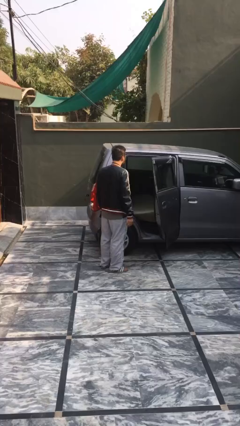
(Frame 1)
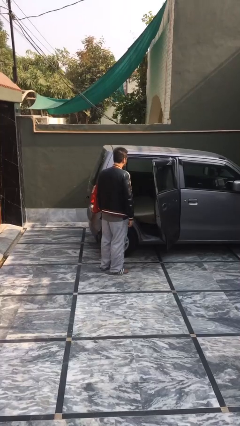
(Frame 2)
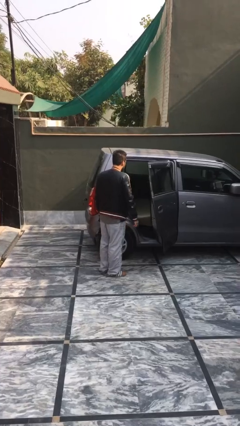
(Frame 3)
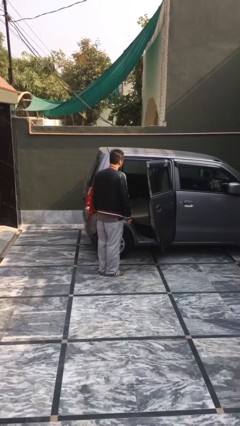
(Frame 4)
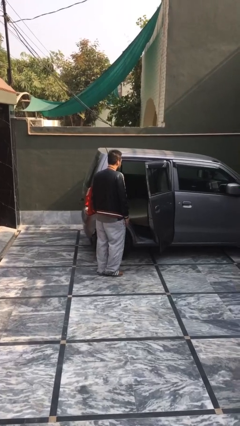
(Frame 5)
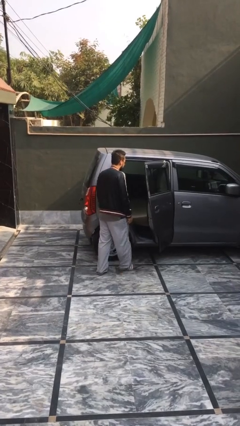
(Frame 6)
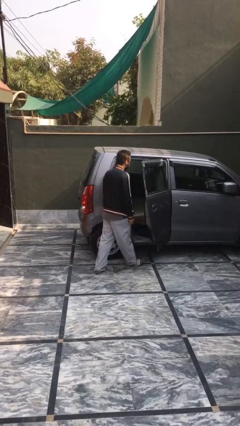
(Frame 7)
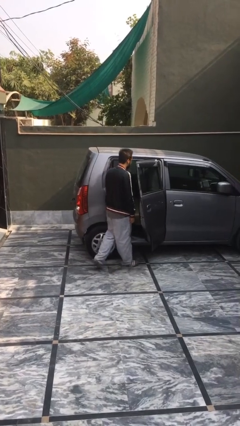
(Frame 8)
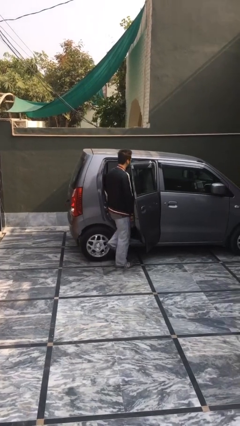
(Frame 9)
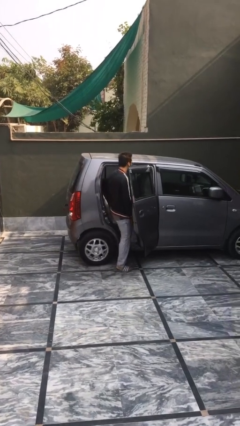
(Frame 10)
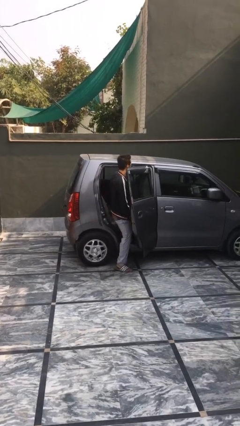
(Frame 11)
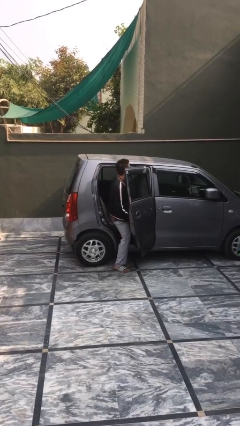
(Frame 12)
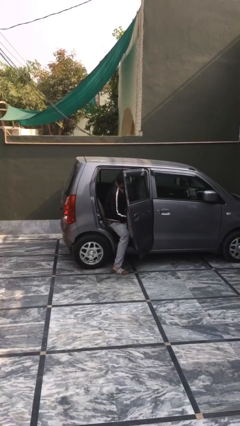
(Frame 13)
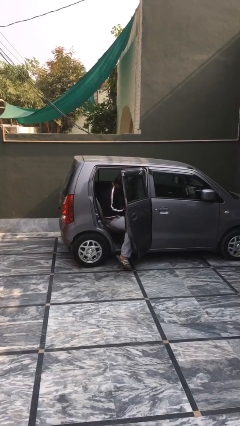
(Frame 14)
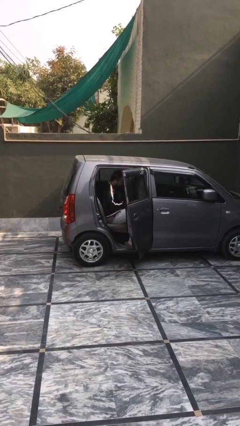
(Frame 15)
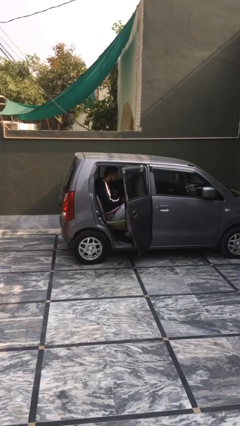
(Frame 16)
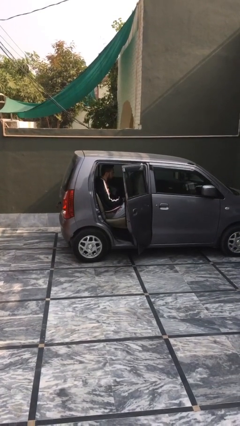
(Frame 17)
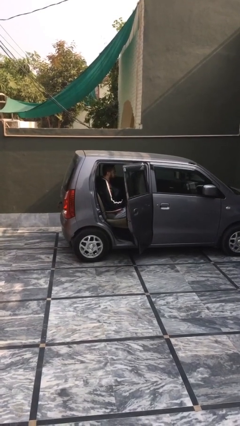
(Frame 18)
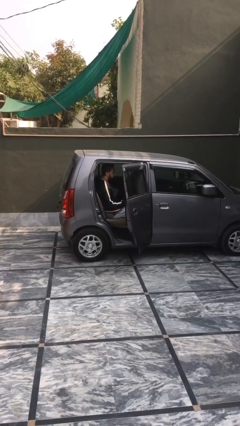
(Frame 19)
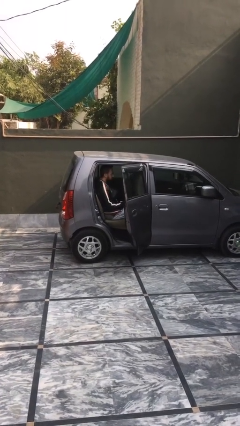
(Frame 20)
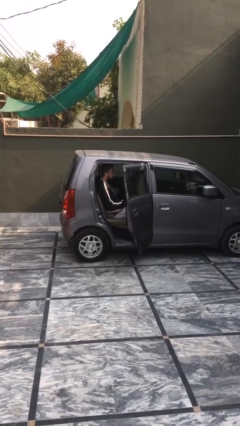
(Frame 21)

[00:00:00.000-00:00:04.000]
person enters car

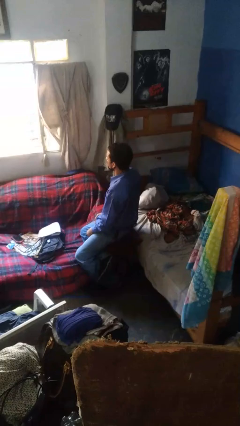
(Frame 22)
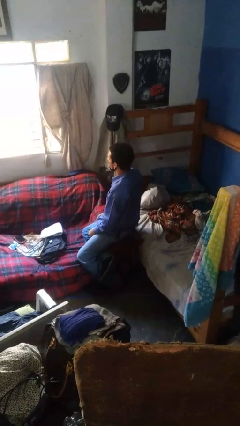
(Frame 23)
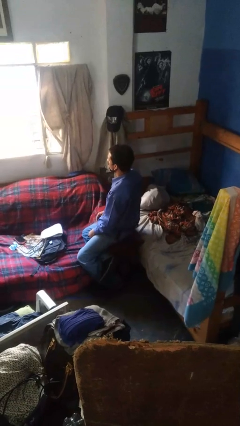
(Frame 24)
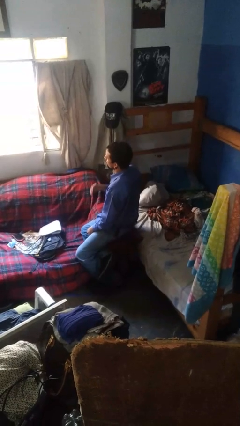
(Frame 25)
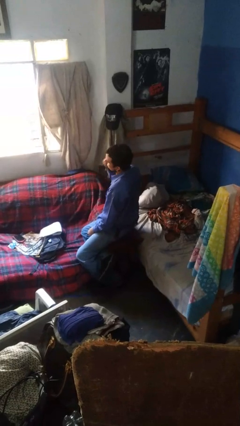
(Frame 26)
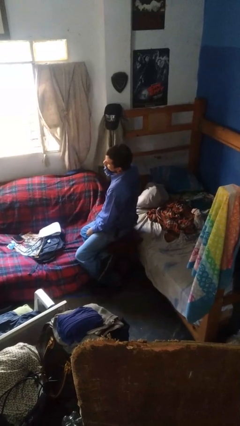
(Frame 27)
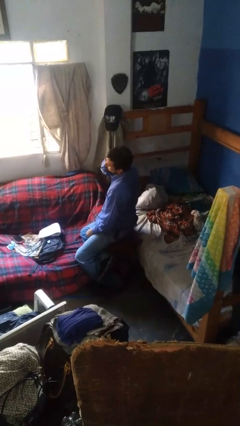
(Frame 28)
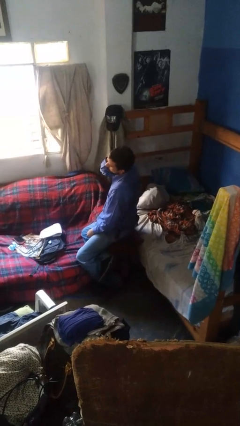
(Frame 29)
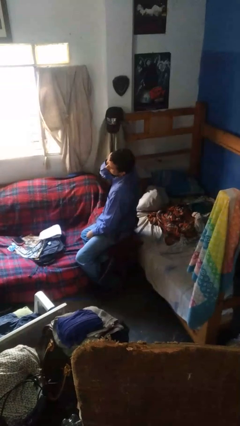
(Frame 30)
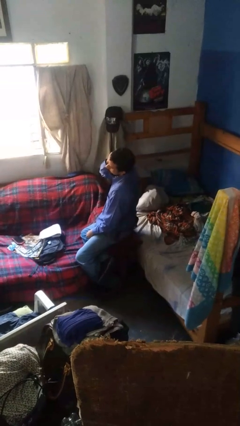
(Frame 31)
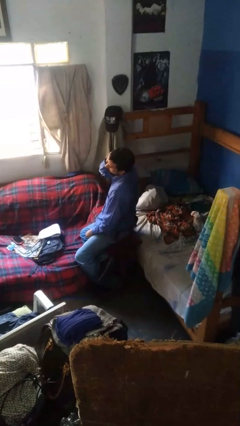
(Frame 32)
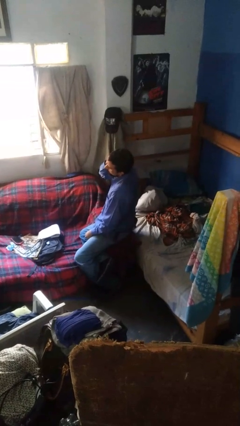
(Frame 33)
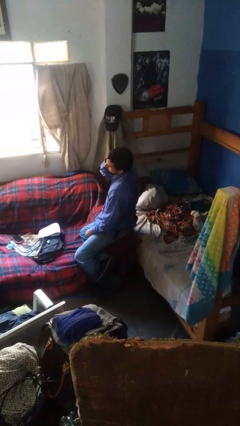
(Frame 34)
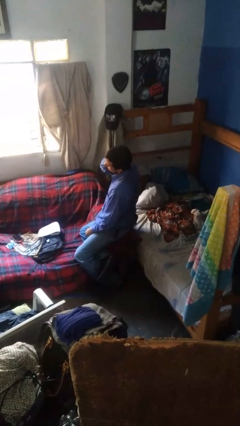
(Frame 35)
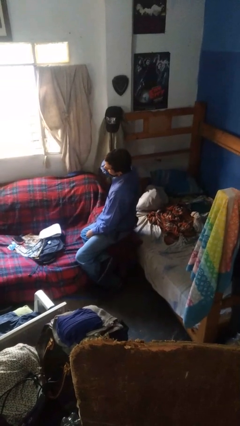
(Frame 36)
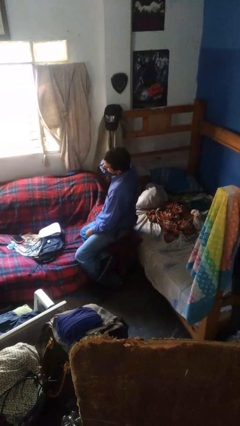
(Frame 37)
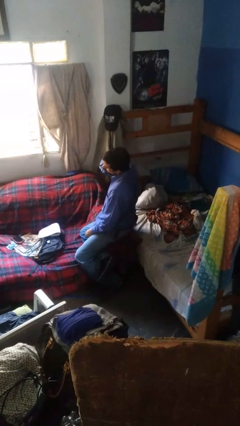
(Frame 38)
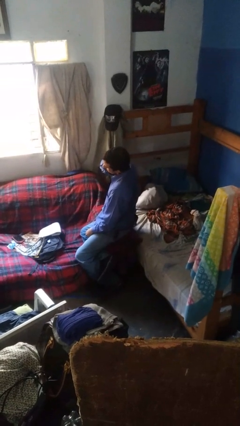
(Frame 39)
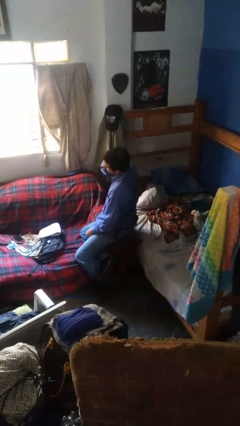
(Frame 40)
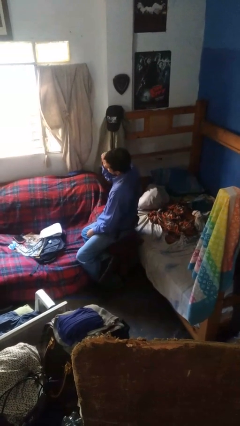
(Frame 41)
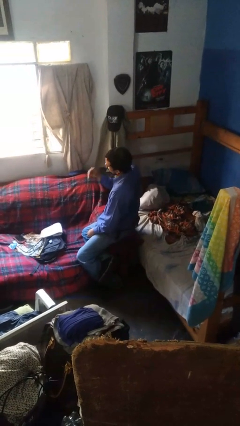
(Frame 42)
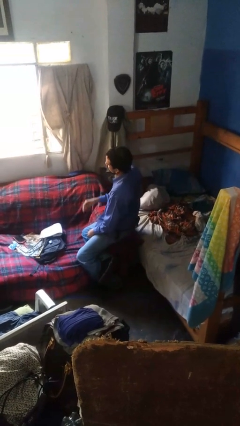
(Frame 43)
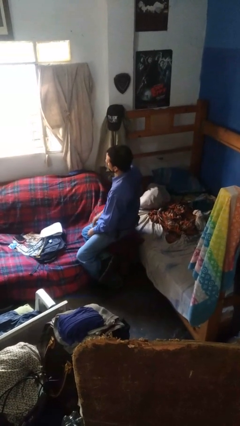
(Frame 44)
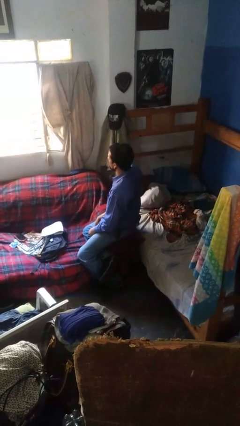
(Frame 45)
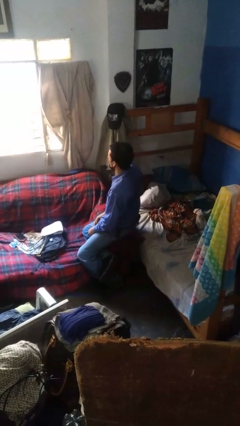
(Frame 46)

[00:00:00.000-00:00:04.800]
person touches earlobe

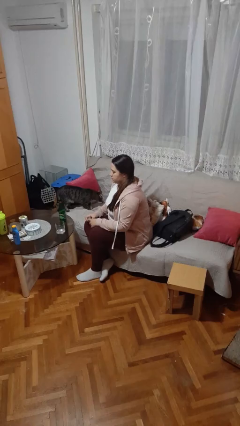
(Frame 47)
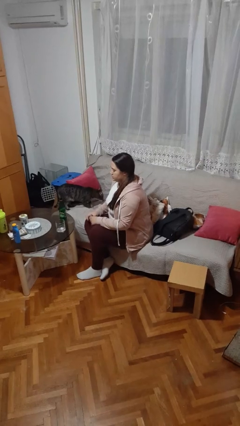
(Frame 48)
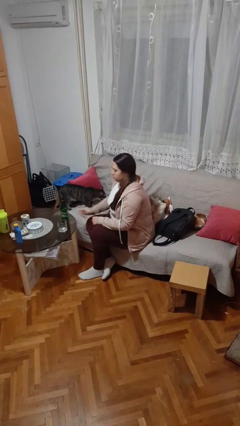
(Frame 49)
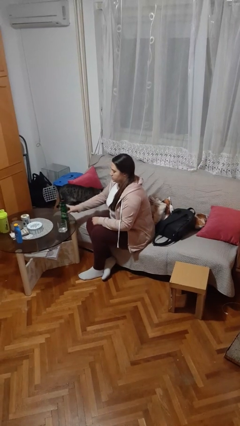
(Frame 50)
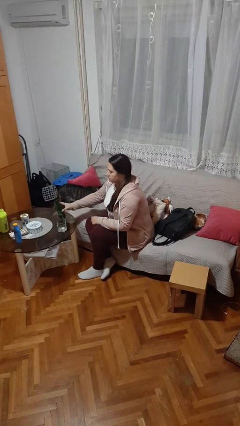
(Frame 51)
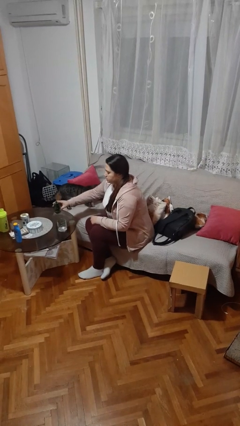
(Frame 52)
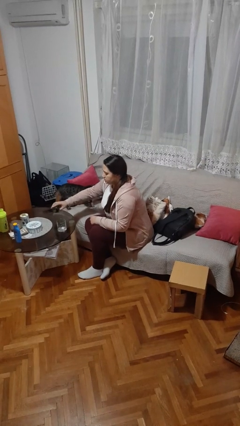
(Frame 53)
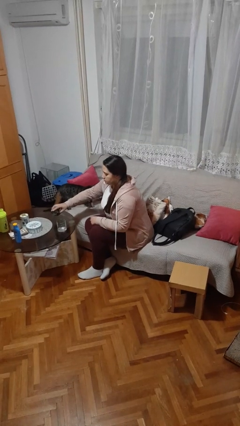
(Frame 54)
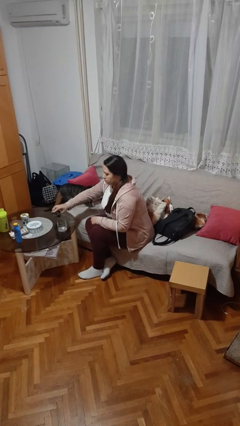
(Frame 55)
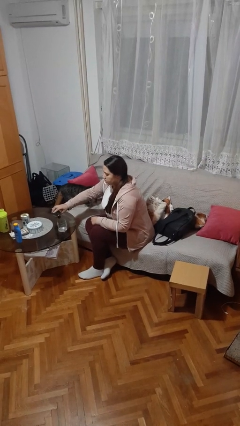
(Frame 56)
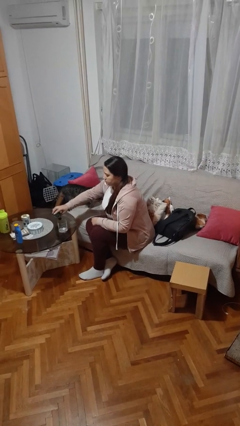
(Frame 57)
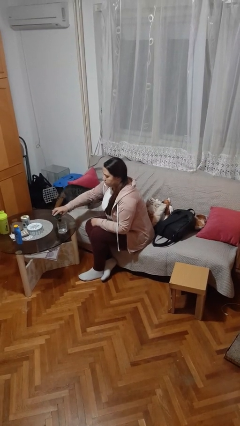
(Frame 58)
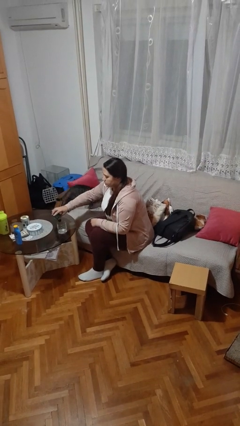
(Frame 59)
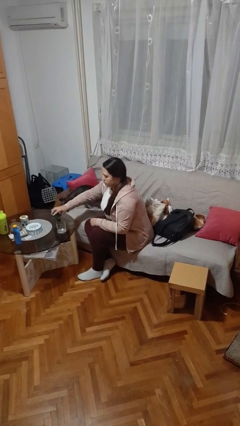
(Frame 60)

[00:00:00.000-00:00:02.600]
person pours liquid into cup

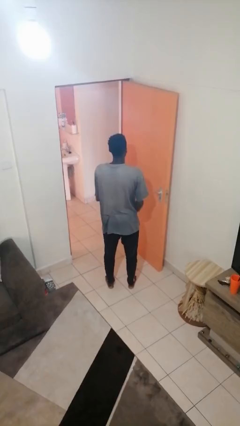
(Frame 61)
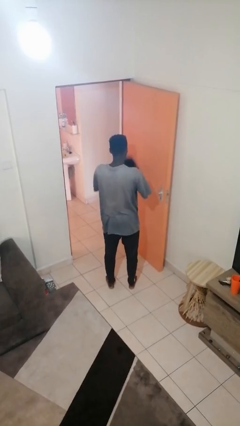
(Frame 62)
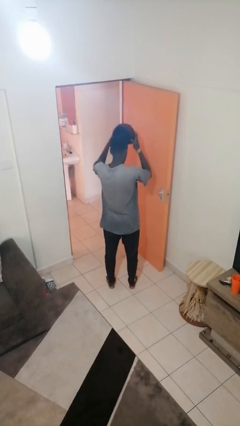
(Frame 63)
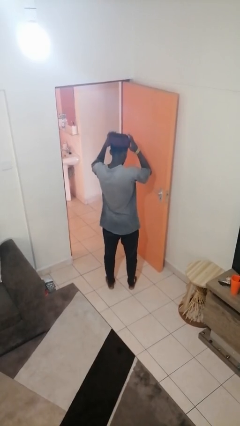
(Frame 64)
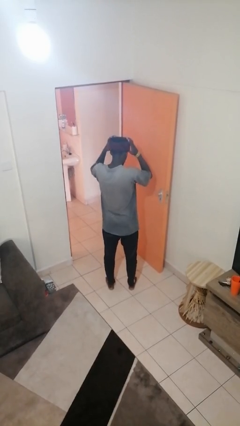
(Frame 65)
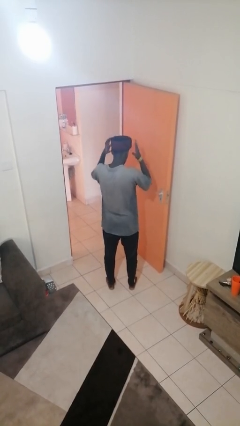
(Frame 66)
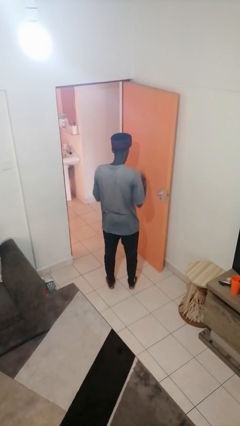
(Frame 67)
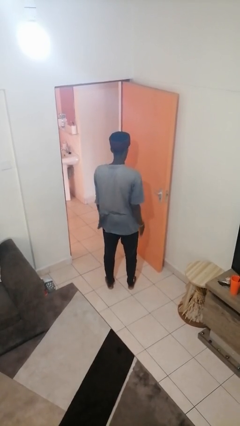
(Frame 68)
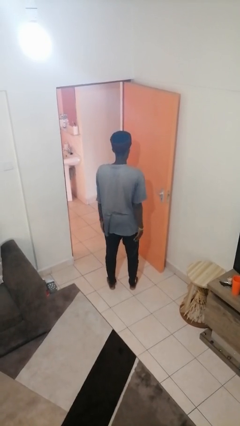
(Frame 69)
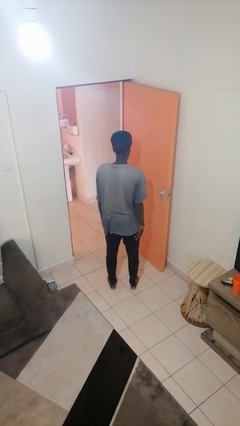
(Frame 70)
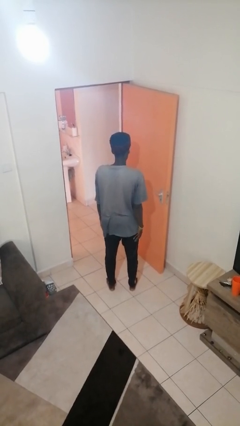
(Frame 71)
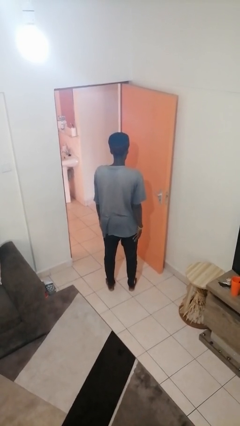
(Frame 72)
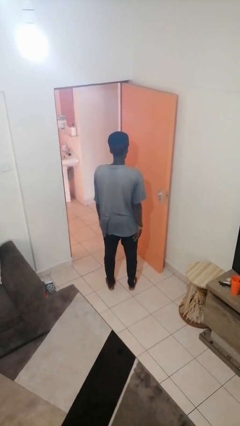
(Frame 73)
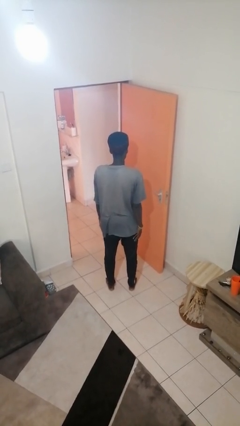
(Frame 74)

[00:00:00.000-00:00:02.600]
person puts on hat

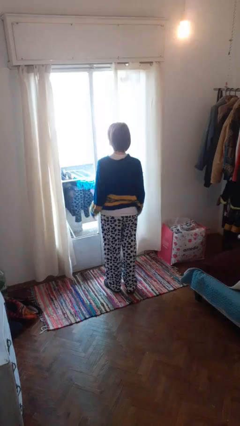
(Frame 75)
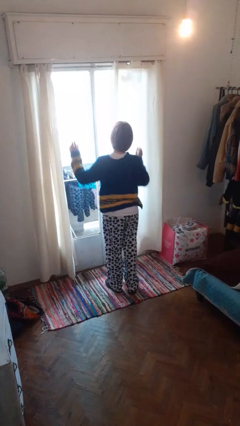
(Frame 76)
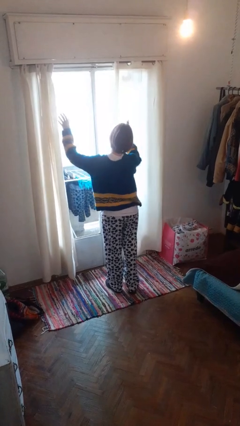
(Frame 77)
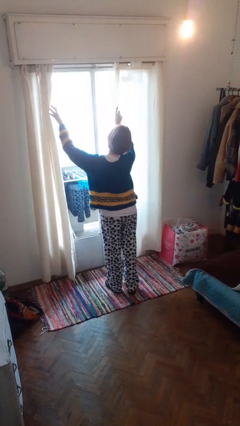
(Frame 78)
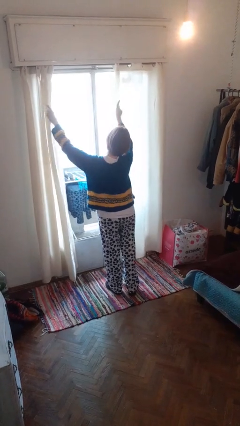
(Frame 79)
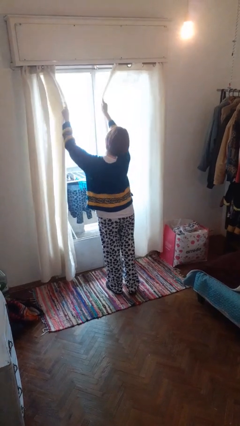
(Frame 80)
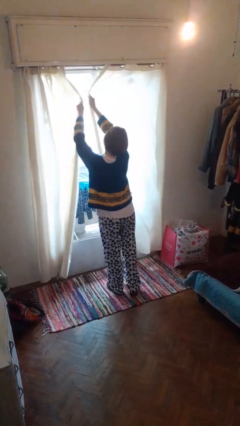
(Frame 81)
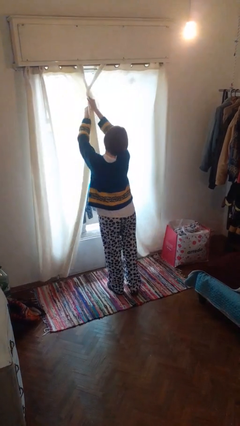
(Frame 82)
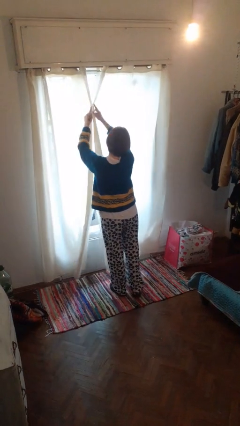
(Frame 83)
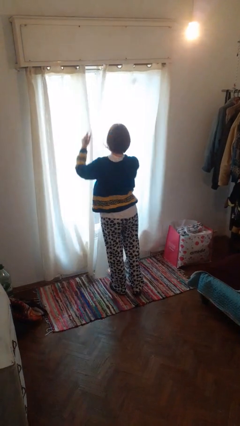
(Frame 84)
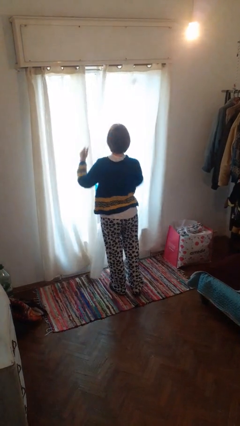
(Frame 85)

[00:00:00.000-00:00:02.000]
person closes curtains

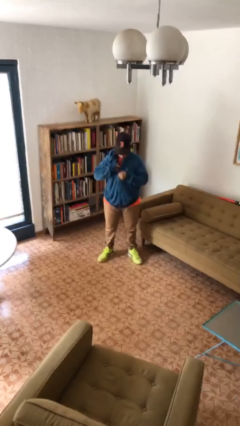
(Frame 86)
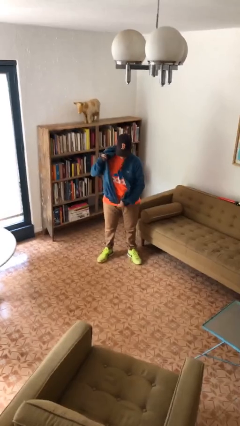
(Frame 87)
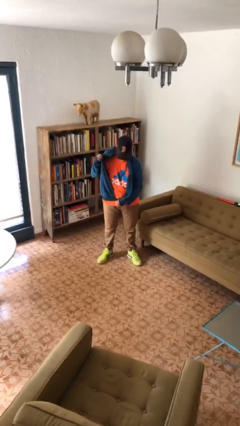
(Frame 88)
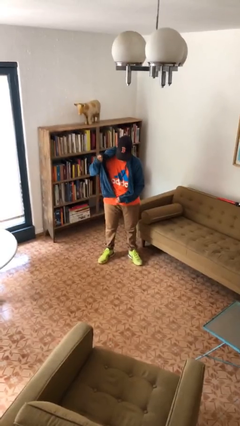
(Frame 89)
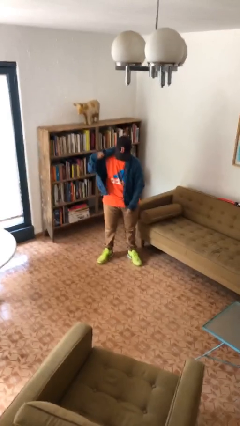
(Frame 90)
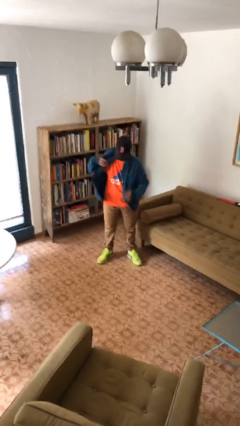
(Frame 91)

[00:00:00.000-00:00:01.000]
person unzips jacket
